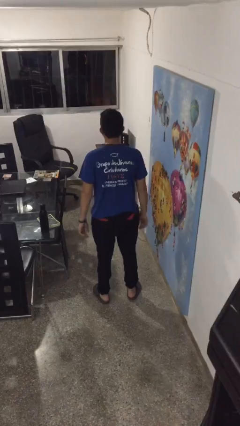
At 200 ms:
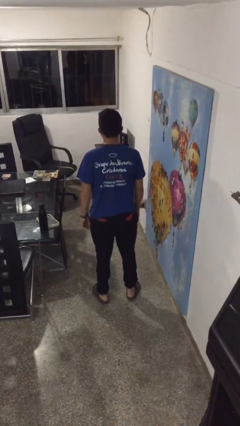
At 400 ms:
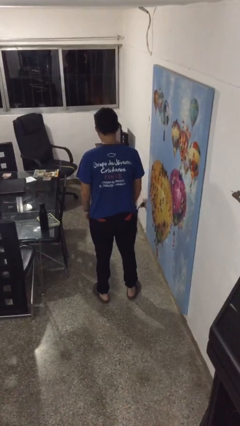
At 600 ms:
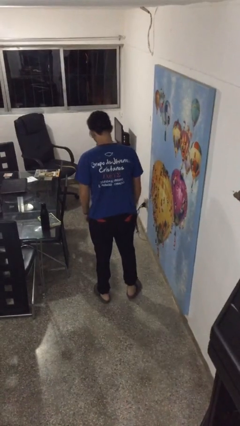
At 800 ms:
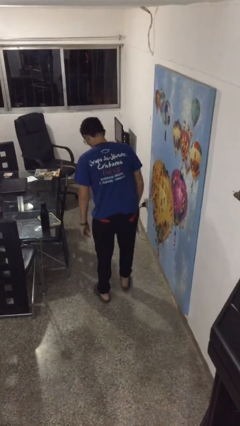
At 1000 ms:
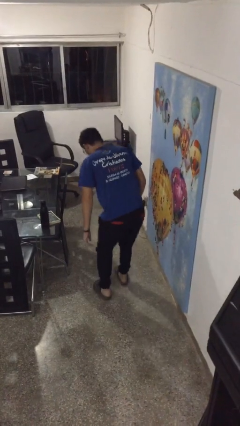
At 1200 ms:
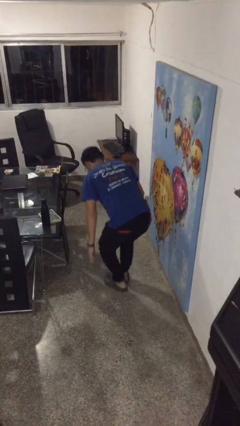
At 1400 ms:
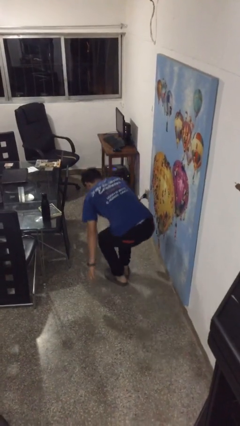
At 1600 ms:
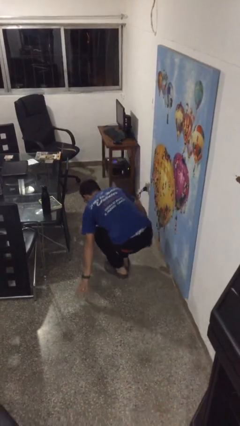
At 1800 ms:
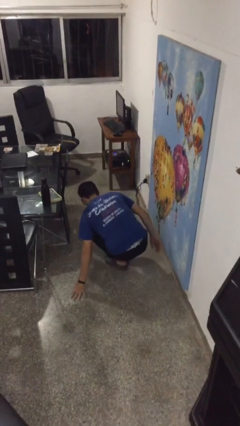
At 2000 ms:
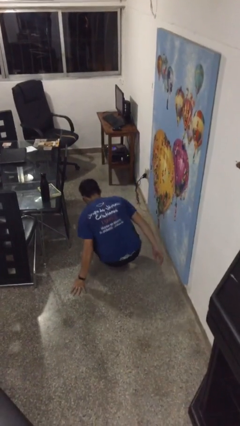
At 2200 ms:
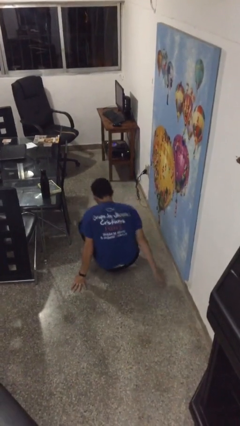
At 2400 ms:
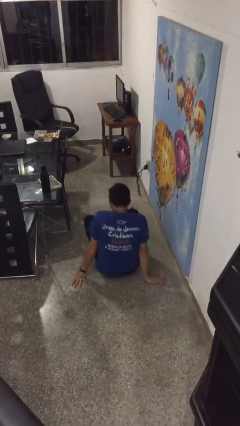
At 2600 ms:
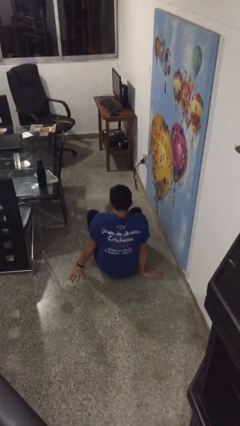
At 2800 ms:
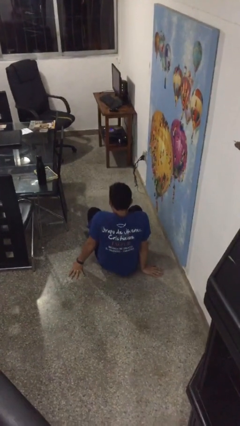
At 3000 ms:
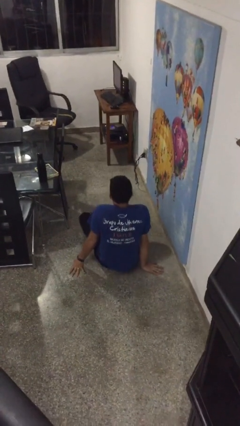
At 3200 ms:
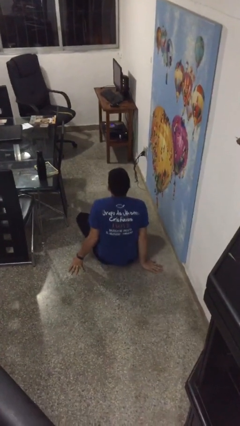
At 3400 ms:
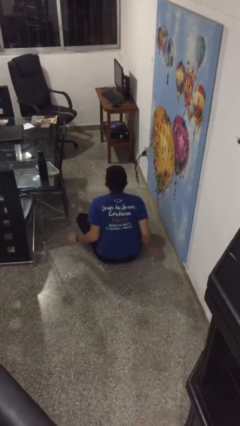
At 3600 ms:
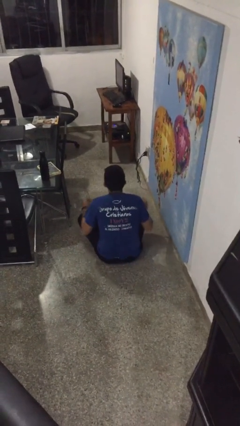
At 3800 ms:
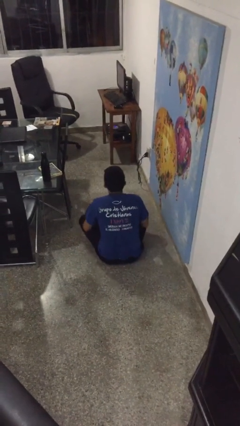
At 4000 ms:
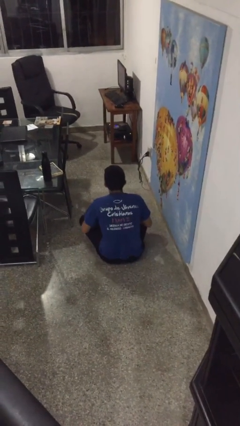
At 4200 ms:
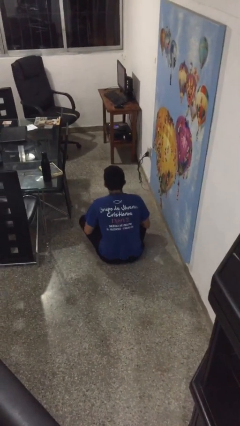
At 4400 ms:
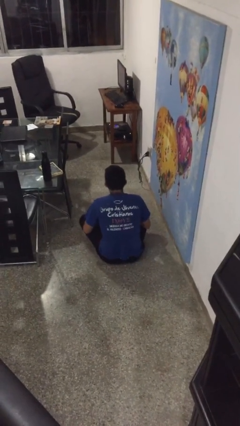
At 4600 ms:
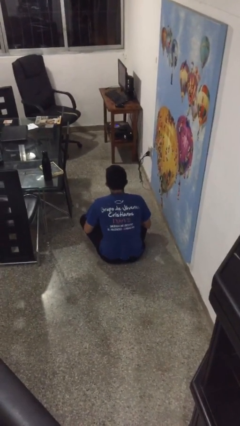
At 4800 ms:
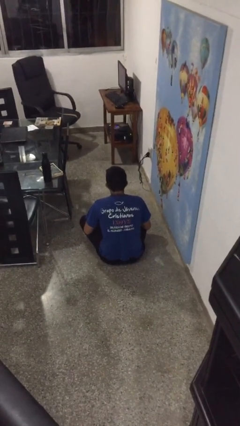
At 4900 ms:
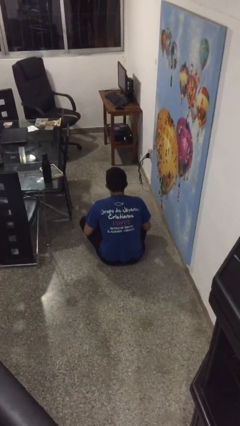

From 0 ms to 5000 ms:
person sits crisscross

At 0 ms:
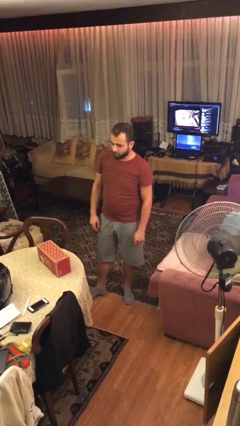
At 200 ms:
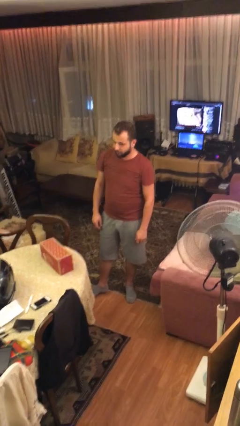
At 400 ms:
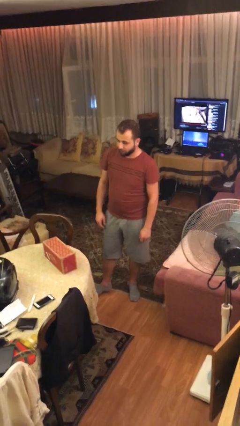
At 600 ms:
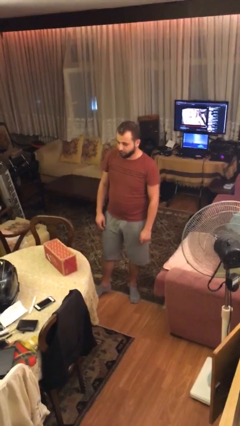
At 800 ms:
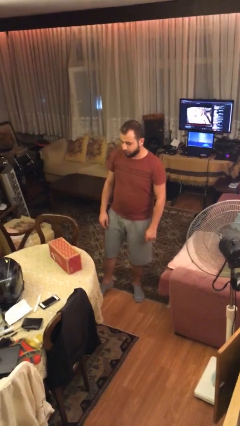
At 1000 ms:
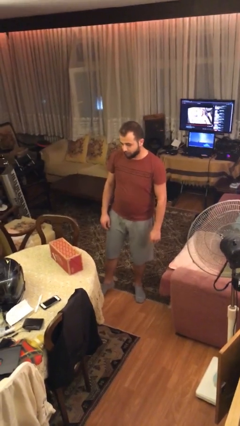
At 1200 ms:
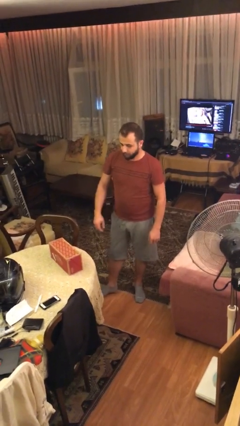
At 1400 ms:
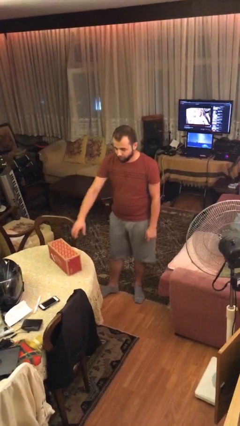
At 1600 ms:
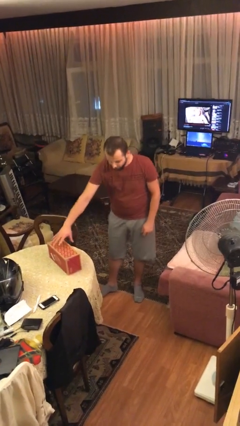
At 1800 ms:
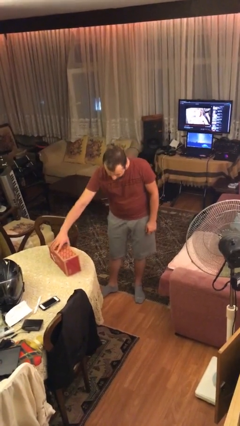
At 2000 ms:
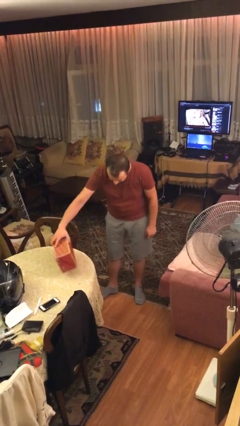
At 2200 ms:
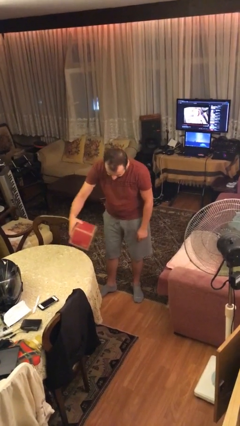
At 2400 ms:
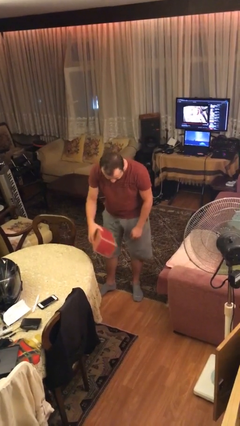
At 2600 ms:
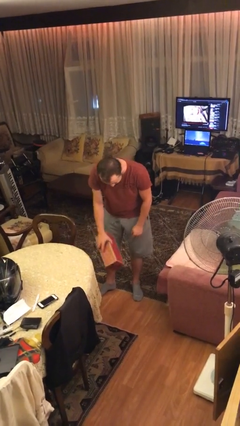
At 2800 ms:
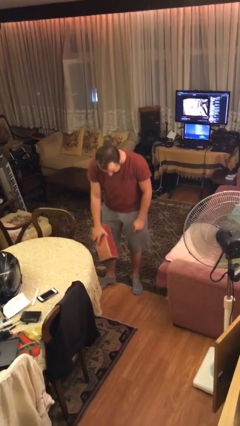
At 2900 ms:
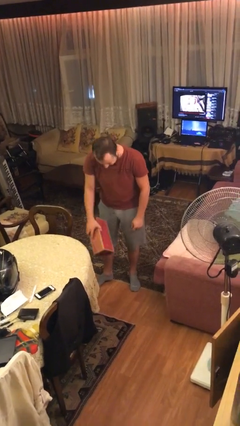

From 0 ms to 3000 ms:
person picks up object from table

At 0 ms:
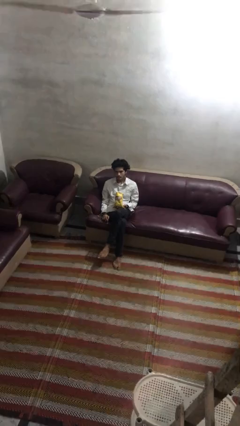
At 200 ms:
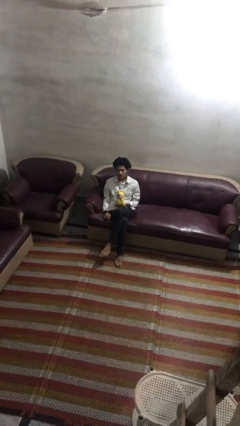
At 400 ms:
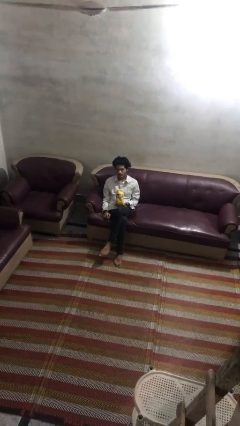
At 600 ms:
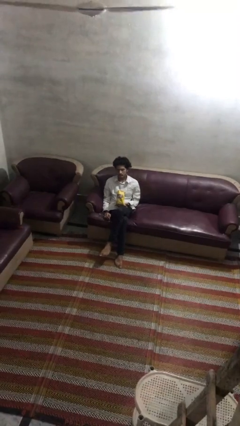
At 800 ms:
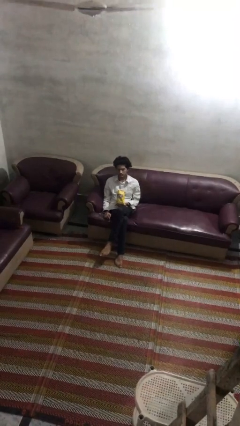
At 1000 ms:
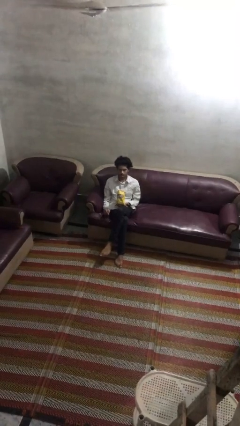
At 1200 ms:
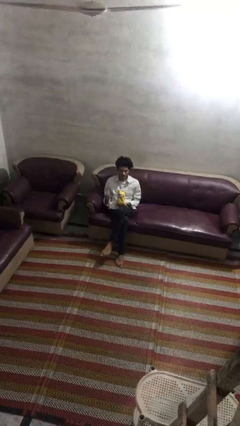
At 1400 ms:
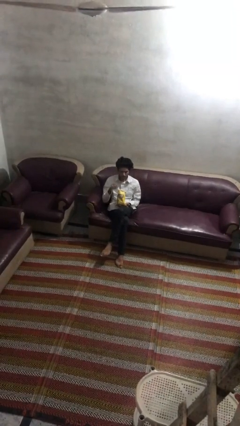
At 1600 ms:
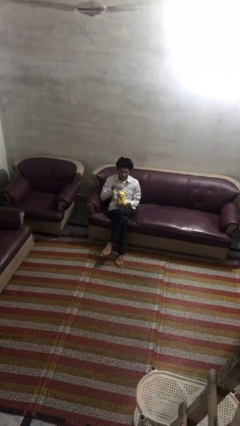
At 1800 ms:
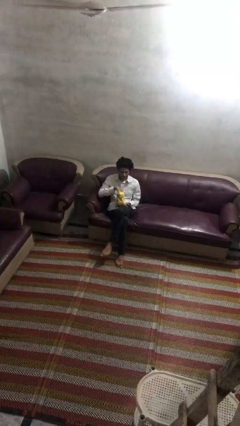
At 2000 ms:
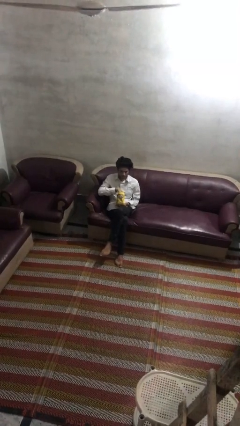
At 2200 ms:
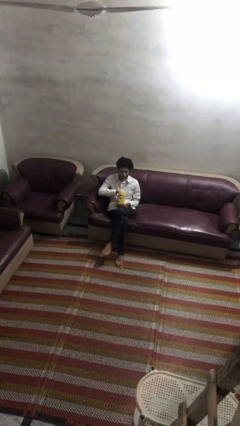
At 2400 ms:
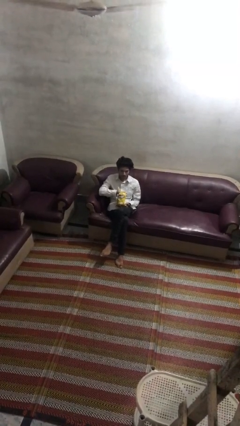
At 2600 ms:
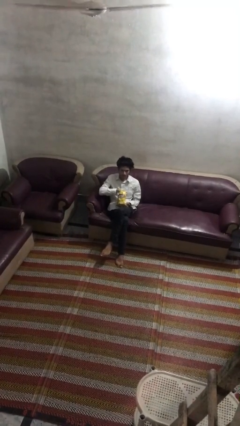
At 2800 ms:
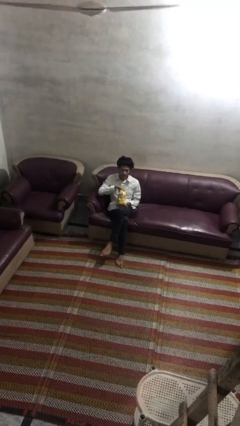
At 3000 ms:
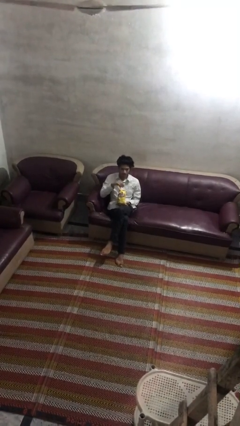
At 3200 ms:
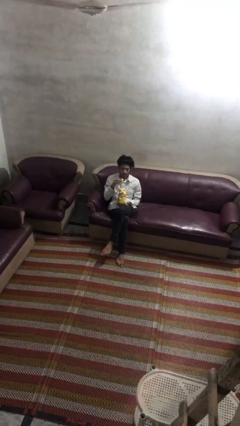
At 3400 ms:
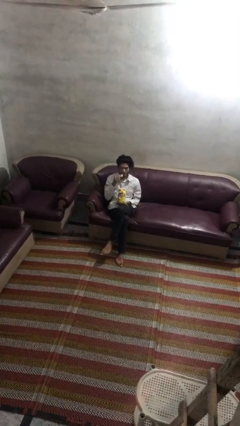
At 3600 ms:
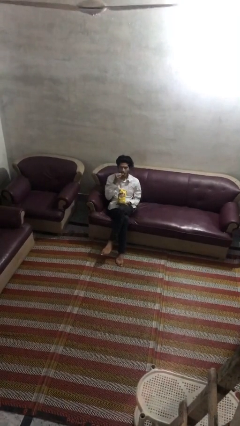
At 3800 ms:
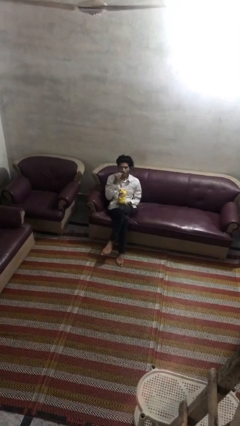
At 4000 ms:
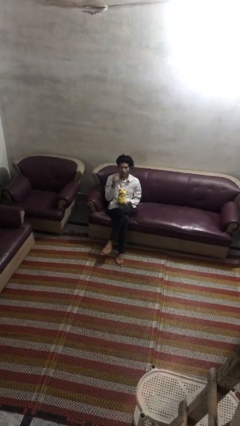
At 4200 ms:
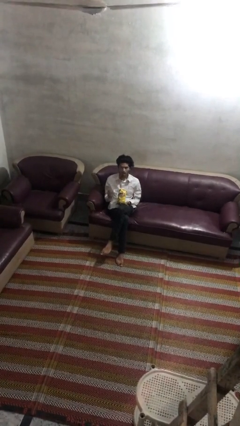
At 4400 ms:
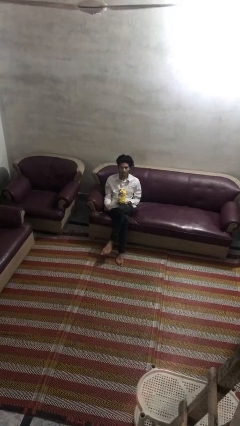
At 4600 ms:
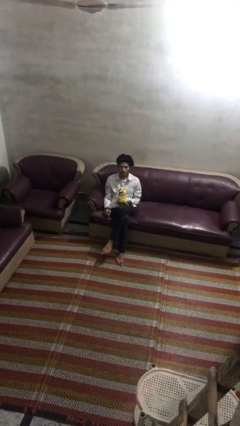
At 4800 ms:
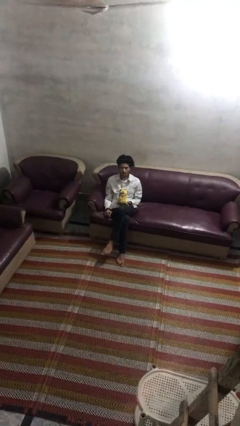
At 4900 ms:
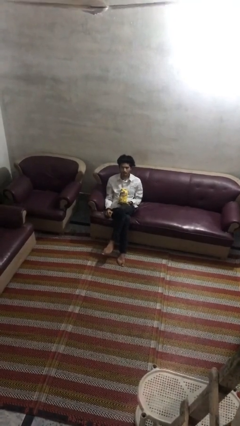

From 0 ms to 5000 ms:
person eats snack from bag

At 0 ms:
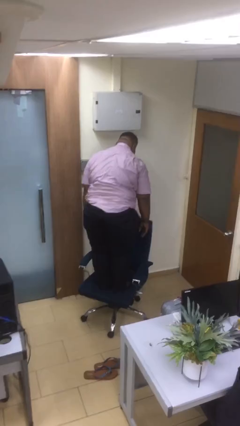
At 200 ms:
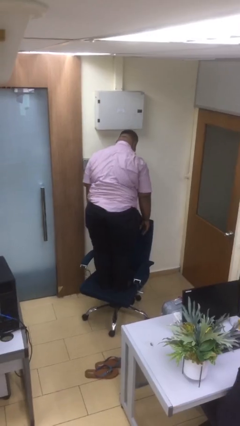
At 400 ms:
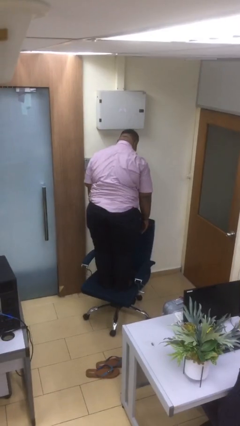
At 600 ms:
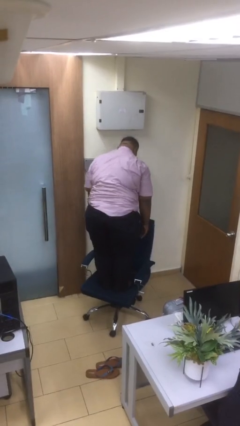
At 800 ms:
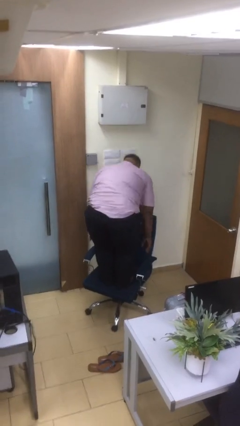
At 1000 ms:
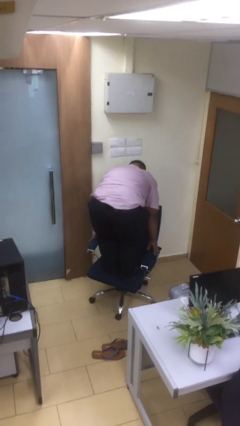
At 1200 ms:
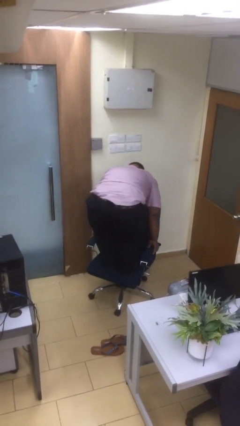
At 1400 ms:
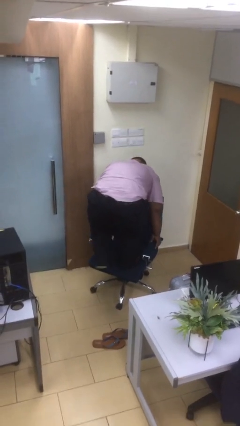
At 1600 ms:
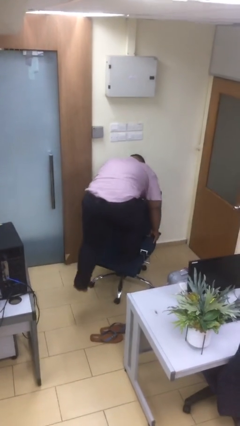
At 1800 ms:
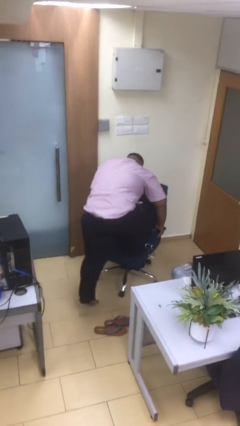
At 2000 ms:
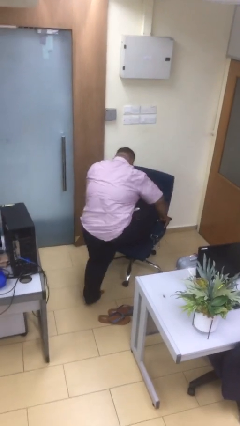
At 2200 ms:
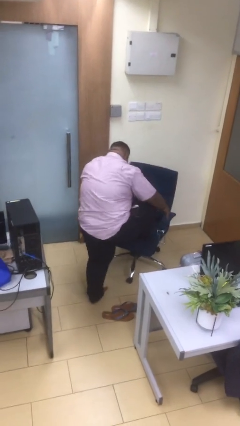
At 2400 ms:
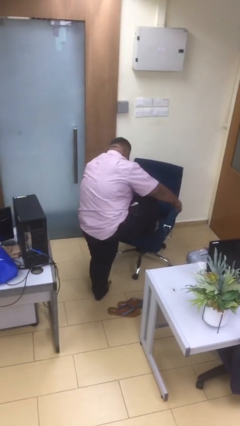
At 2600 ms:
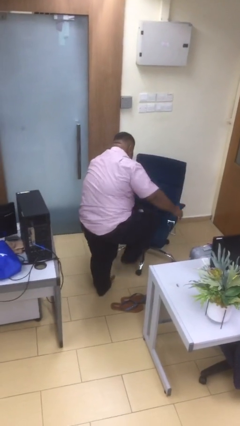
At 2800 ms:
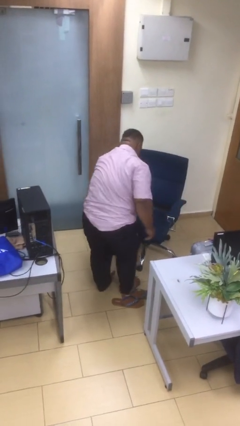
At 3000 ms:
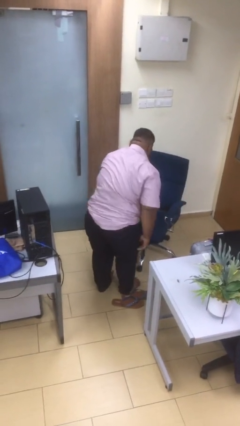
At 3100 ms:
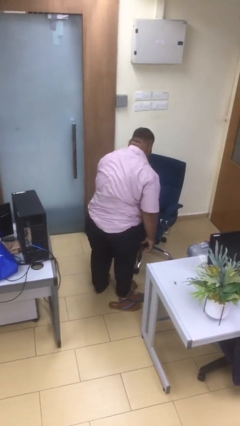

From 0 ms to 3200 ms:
person climbs off chair

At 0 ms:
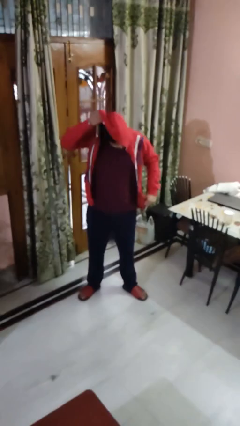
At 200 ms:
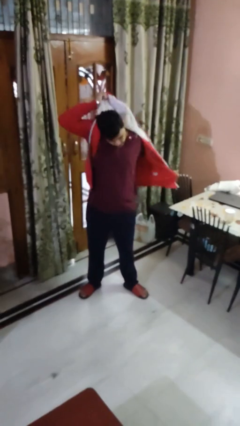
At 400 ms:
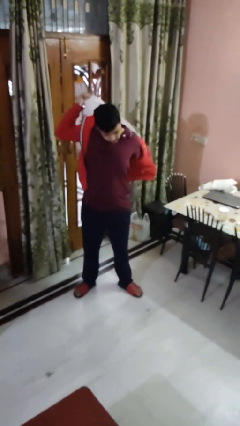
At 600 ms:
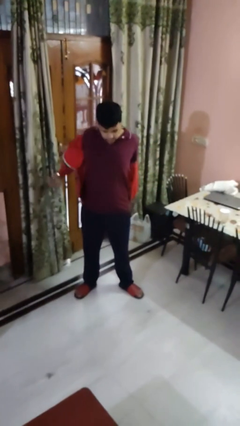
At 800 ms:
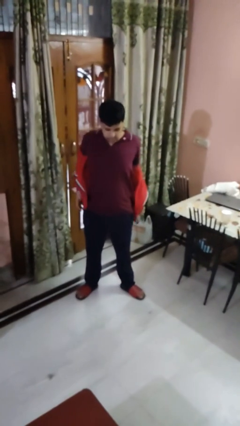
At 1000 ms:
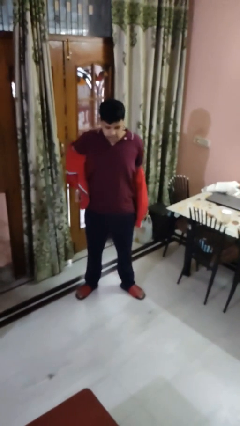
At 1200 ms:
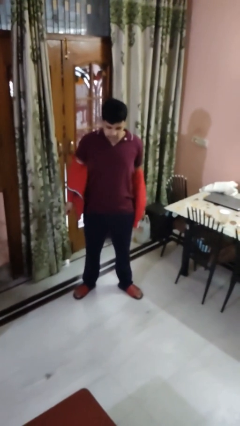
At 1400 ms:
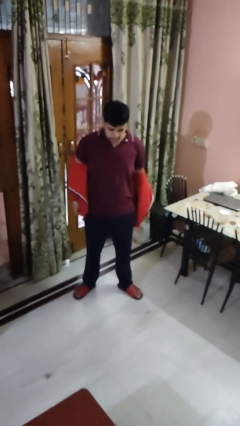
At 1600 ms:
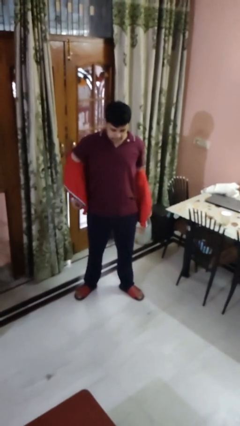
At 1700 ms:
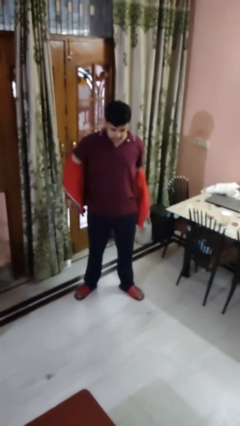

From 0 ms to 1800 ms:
person takes off hoodie
